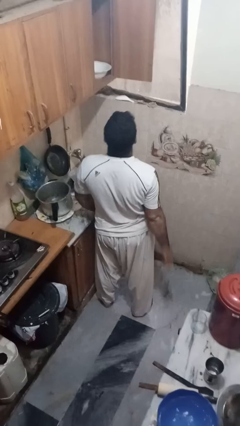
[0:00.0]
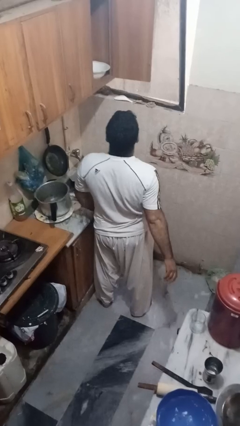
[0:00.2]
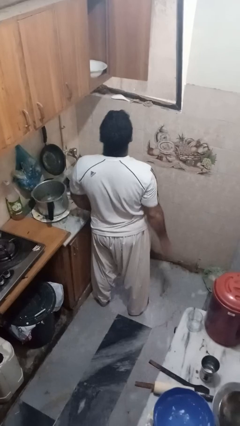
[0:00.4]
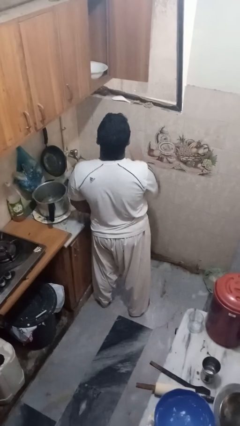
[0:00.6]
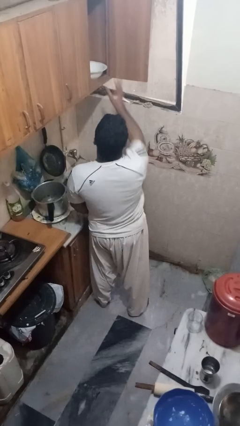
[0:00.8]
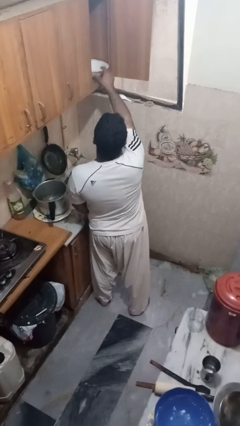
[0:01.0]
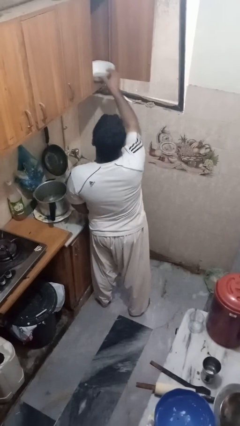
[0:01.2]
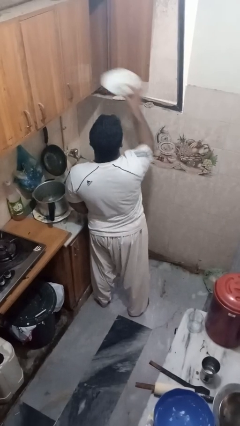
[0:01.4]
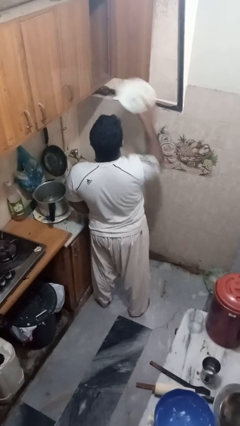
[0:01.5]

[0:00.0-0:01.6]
person takes object from cabinet

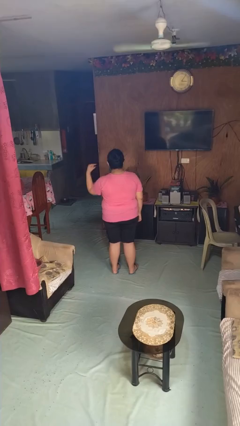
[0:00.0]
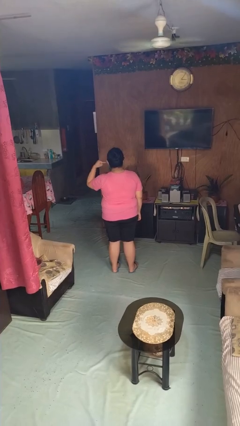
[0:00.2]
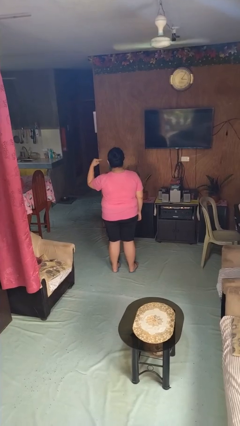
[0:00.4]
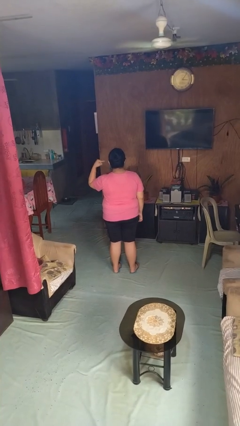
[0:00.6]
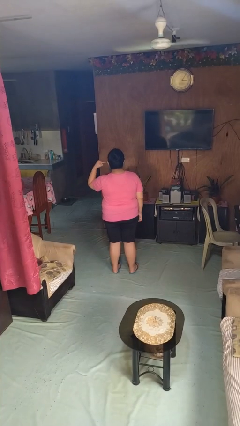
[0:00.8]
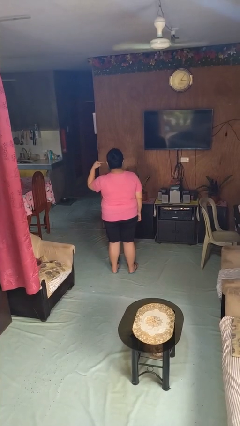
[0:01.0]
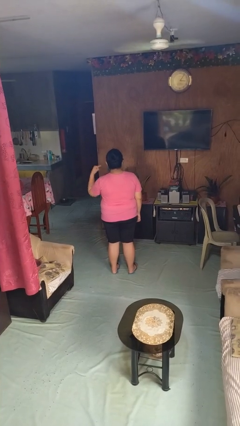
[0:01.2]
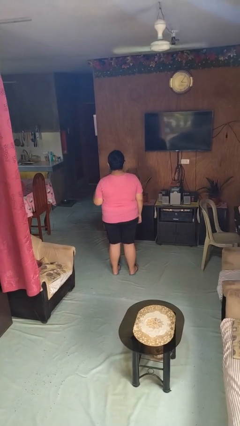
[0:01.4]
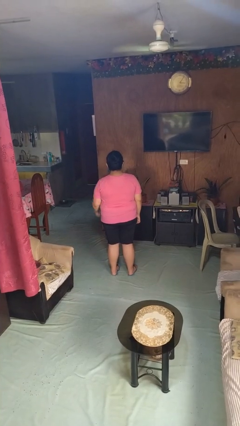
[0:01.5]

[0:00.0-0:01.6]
person gestures listen closely

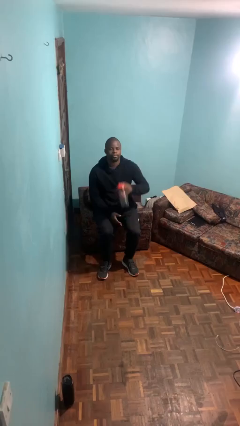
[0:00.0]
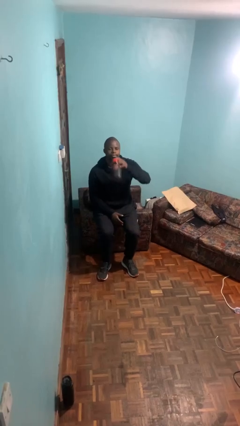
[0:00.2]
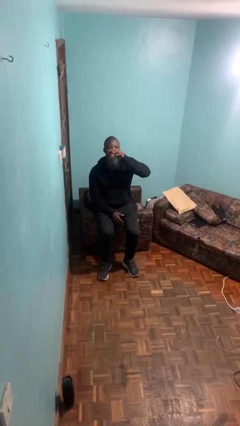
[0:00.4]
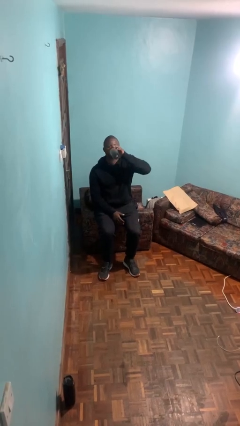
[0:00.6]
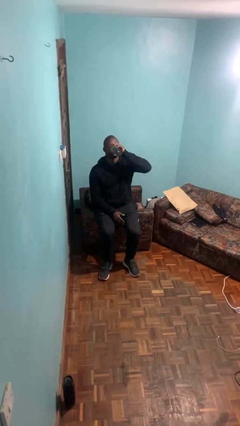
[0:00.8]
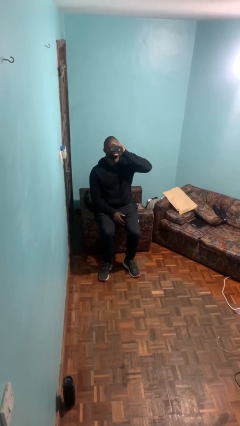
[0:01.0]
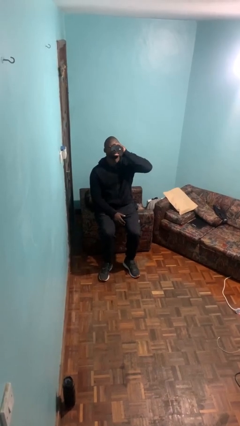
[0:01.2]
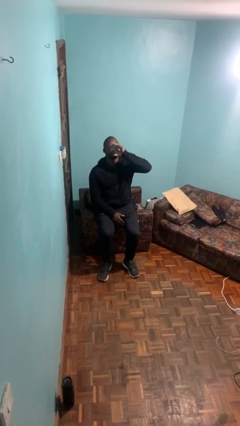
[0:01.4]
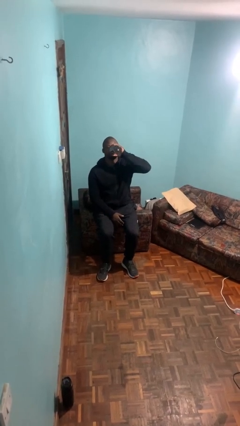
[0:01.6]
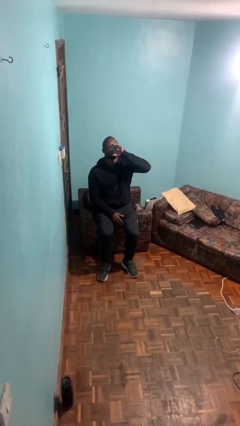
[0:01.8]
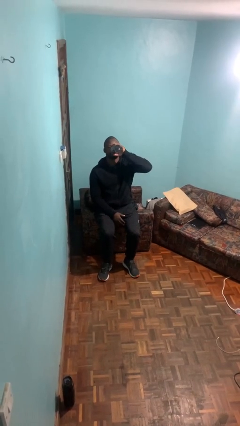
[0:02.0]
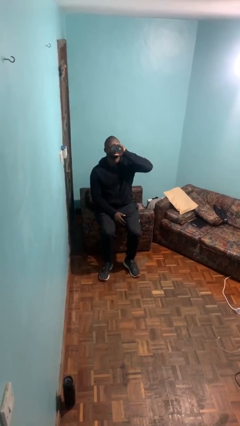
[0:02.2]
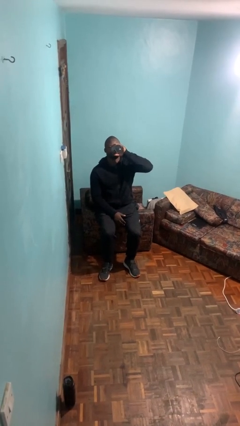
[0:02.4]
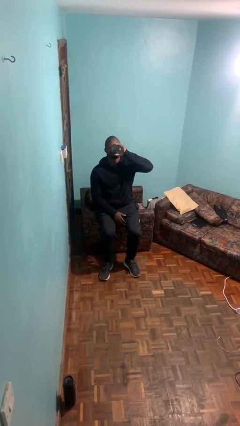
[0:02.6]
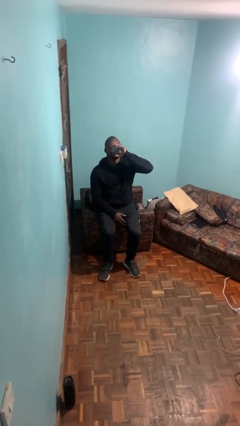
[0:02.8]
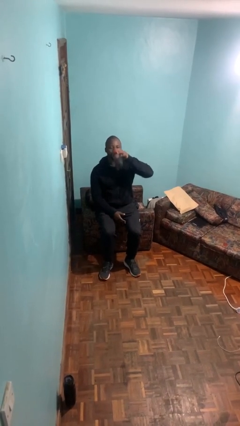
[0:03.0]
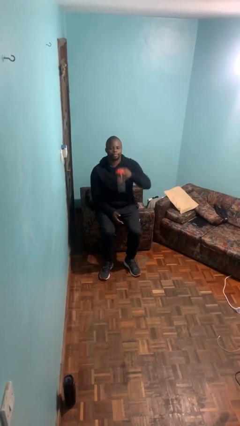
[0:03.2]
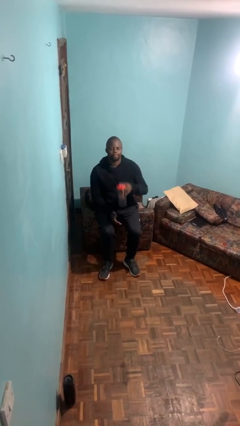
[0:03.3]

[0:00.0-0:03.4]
person drinks from bottle

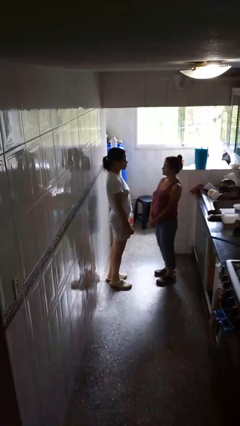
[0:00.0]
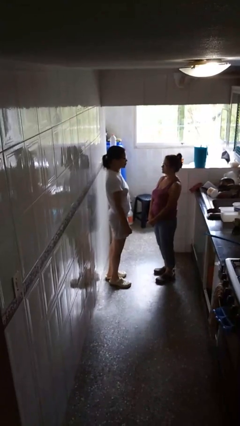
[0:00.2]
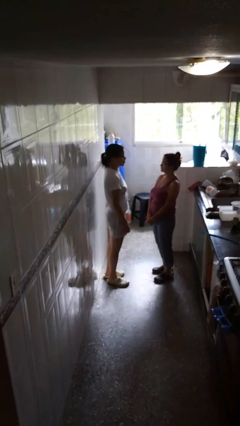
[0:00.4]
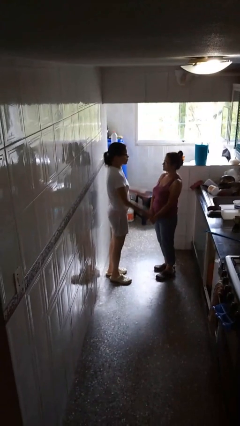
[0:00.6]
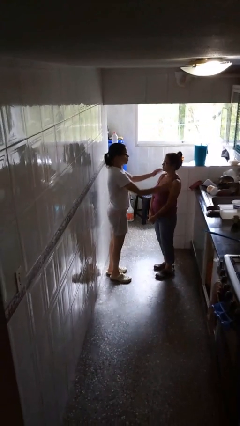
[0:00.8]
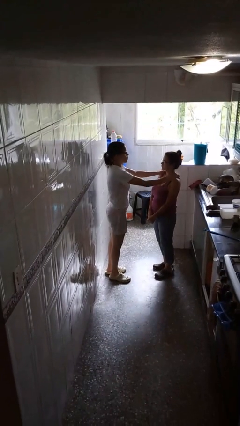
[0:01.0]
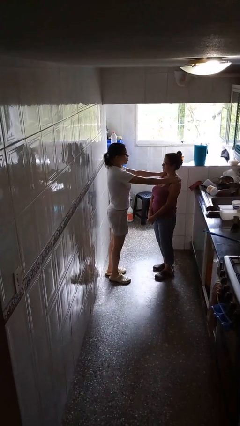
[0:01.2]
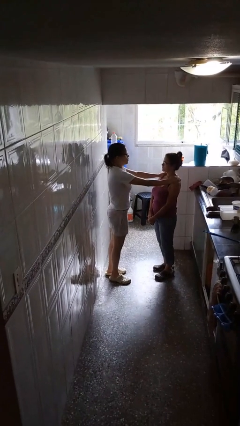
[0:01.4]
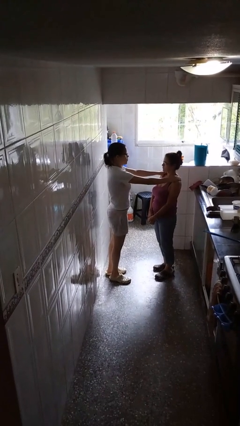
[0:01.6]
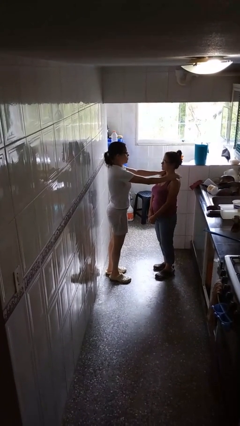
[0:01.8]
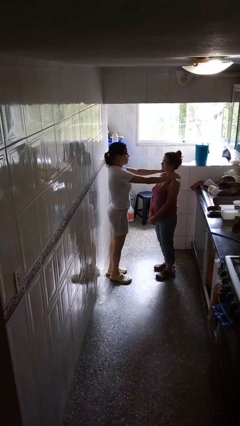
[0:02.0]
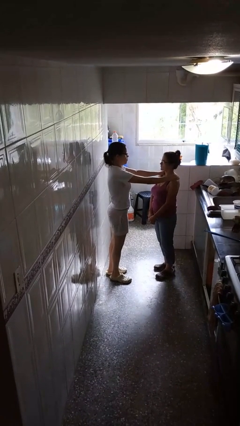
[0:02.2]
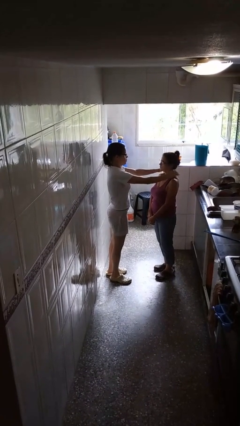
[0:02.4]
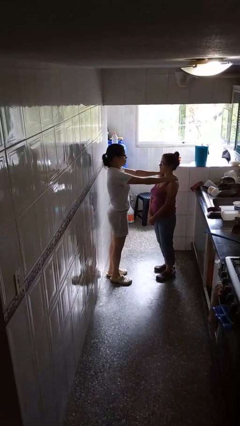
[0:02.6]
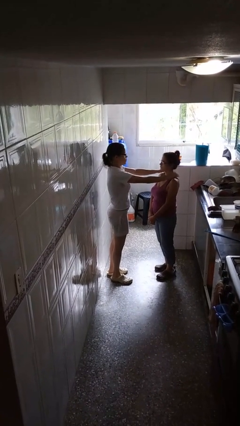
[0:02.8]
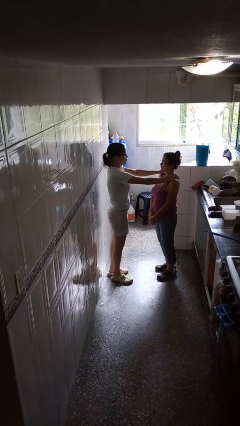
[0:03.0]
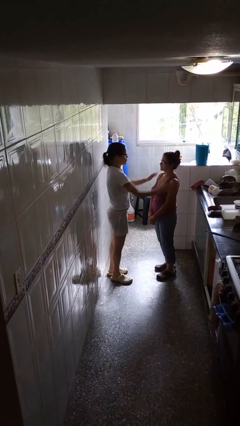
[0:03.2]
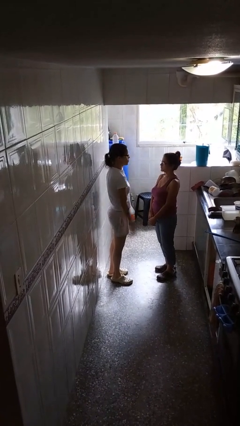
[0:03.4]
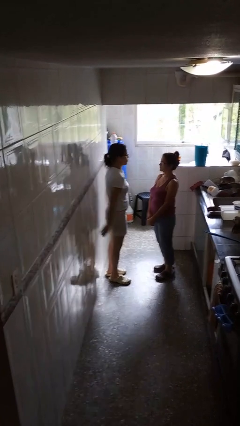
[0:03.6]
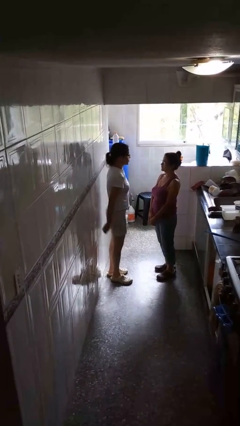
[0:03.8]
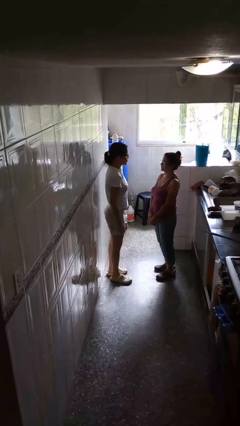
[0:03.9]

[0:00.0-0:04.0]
person pounds shoulders of person

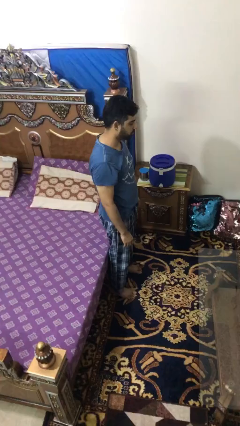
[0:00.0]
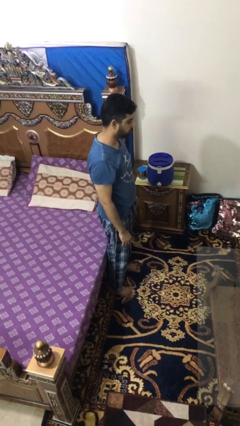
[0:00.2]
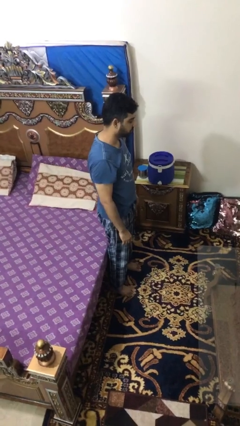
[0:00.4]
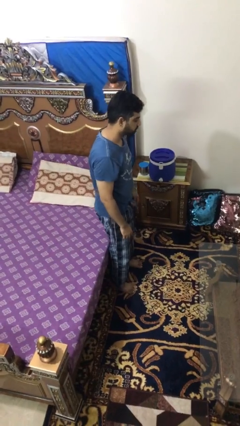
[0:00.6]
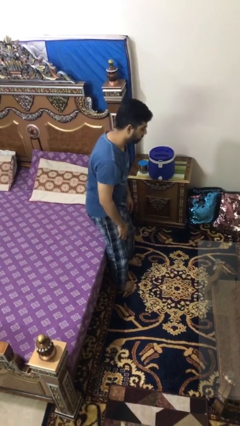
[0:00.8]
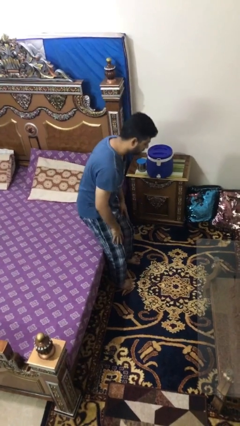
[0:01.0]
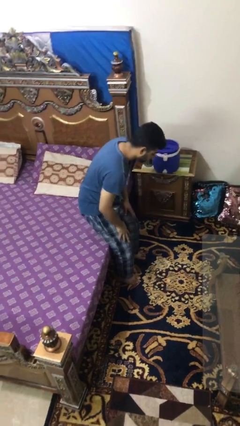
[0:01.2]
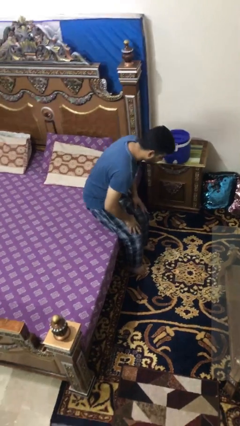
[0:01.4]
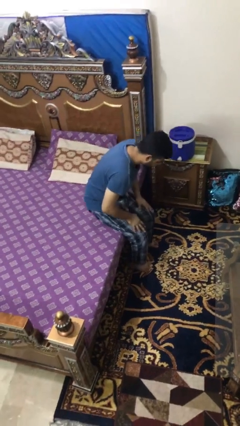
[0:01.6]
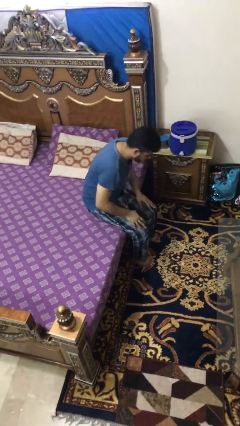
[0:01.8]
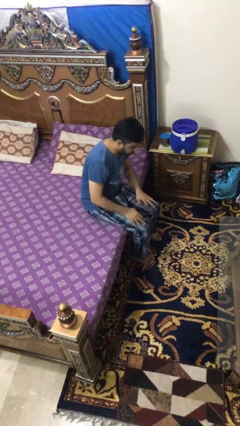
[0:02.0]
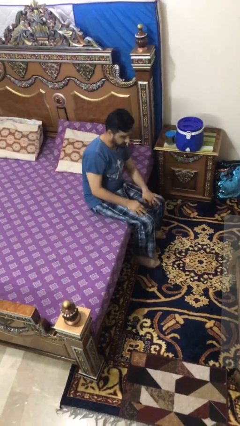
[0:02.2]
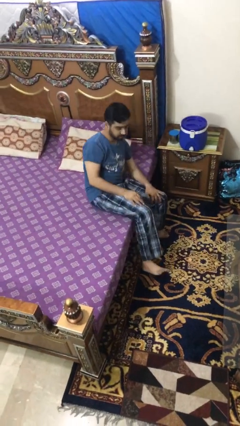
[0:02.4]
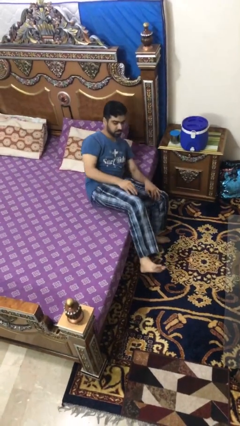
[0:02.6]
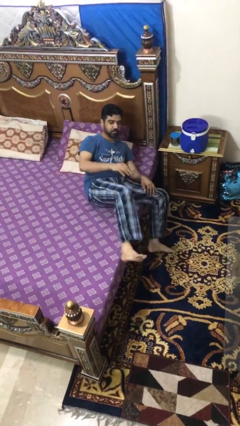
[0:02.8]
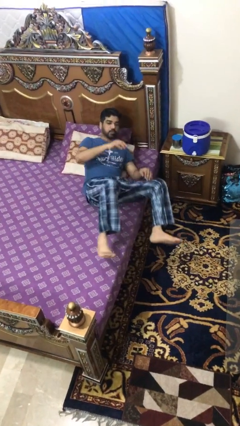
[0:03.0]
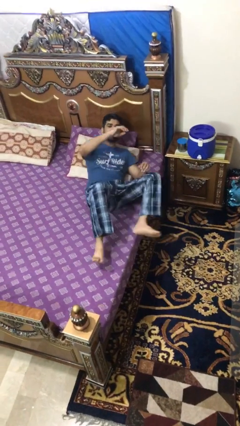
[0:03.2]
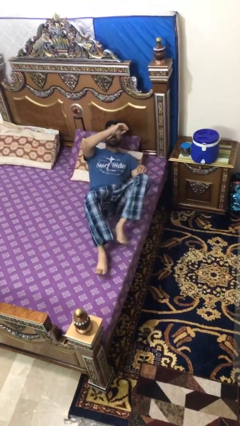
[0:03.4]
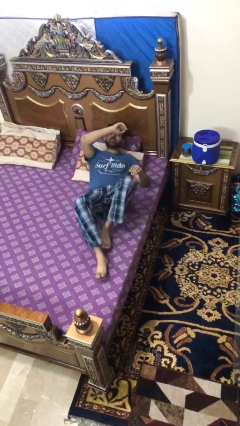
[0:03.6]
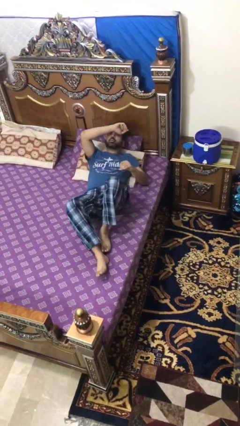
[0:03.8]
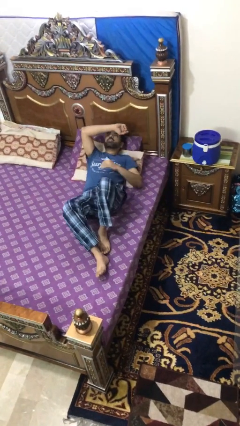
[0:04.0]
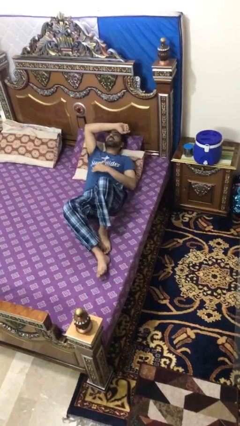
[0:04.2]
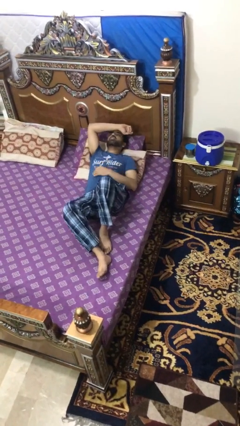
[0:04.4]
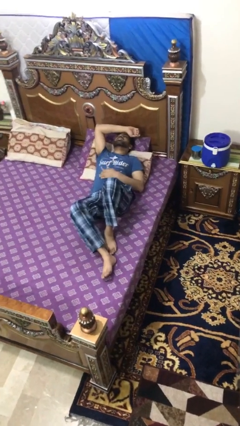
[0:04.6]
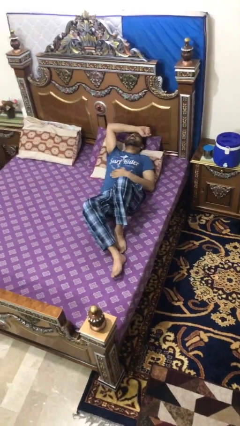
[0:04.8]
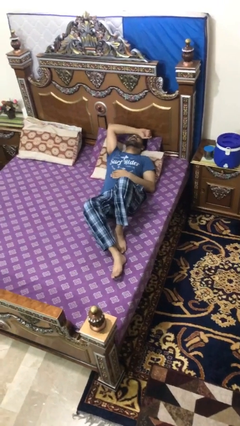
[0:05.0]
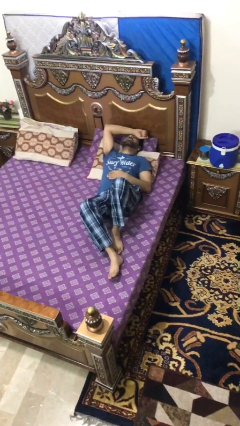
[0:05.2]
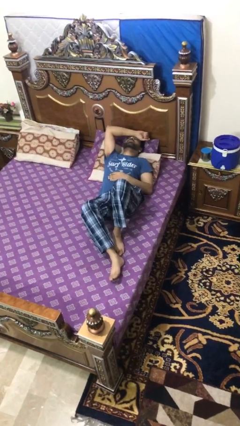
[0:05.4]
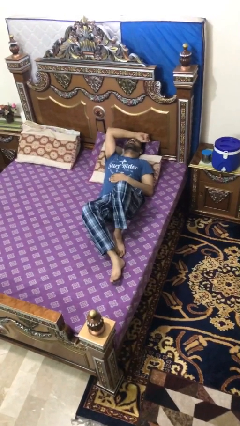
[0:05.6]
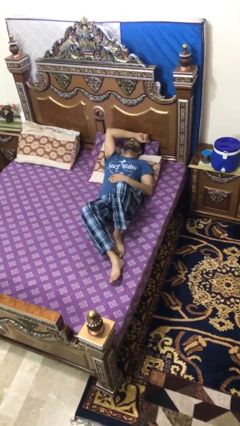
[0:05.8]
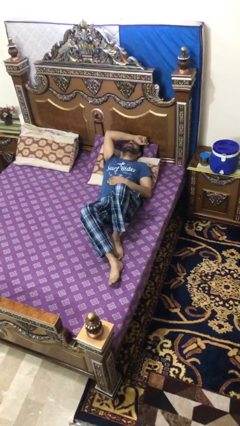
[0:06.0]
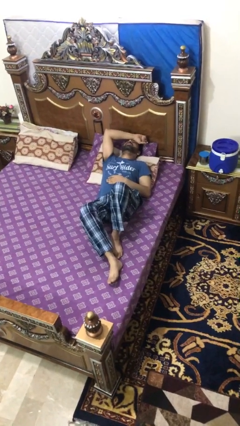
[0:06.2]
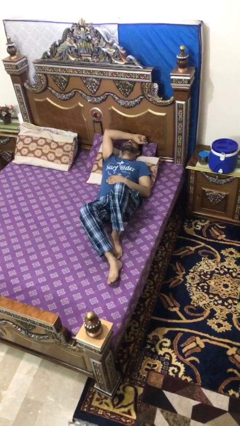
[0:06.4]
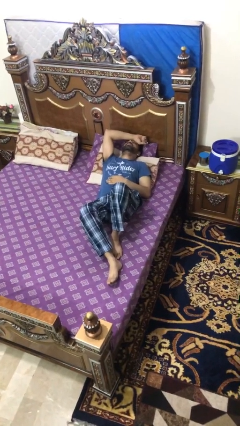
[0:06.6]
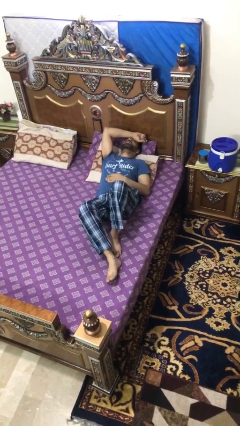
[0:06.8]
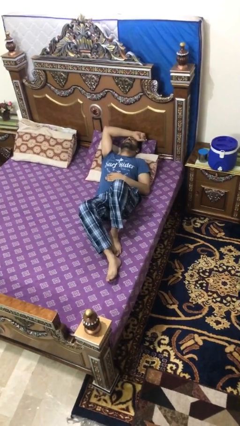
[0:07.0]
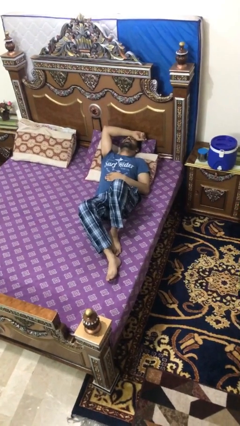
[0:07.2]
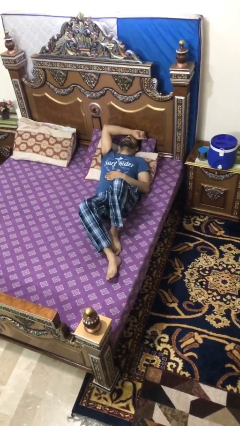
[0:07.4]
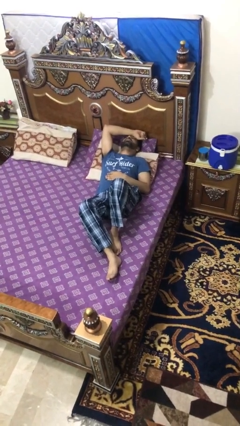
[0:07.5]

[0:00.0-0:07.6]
person lies down on bed
